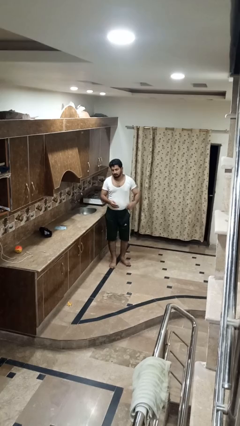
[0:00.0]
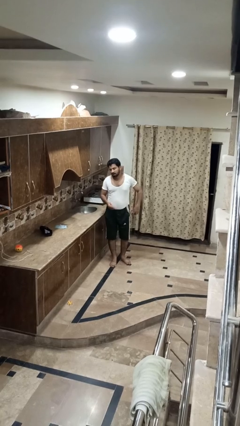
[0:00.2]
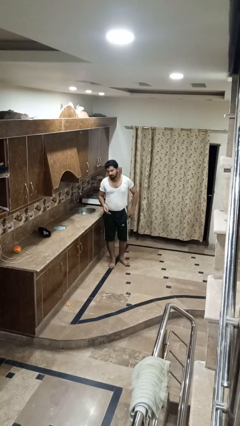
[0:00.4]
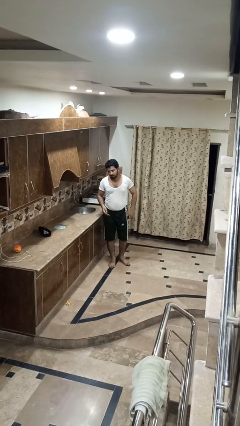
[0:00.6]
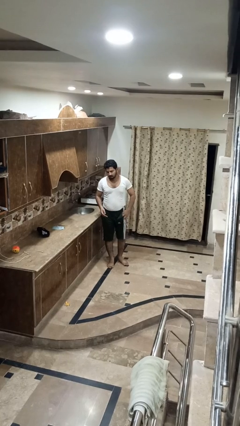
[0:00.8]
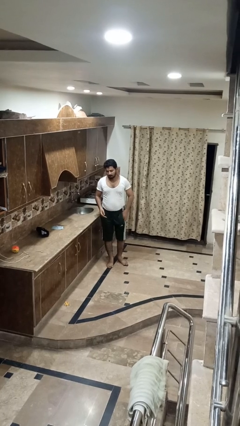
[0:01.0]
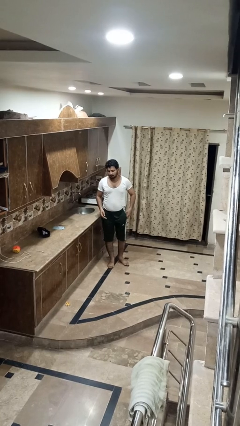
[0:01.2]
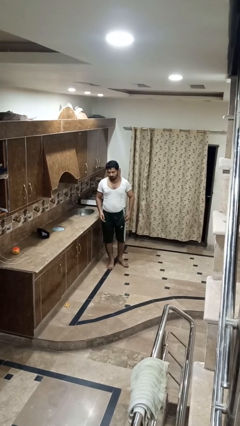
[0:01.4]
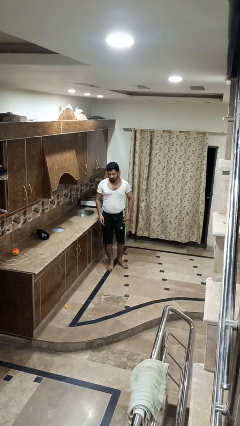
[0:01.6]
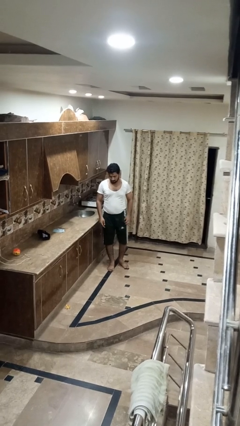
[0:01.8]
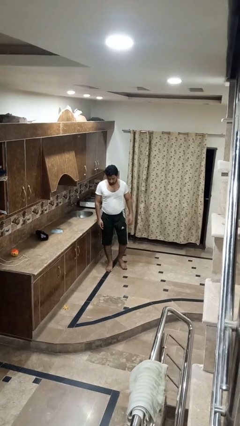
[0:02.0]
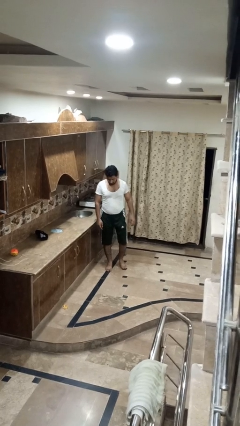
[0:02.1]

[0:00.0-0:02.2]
person puts phone into pocket

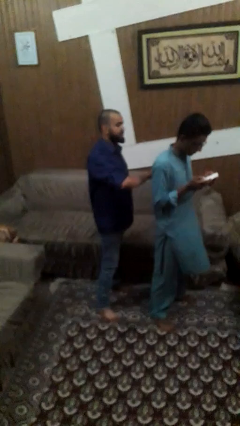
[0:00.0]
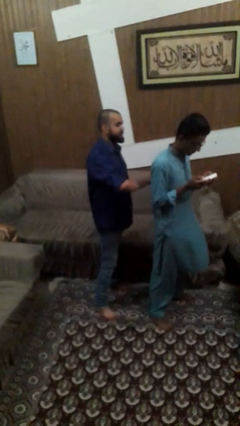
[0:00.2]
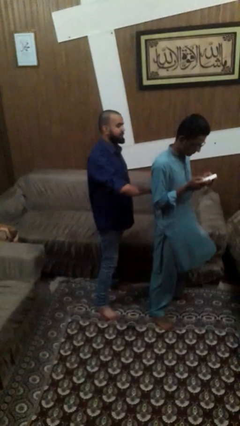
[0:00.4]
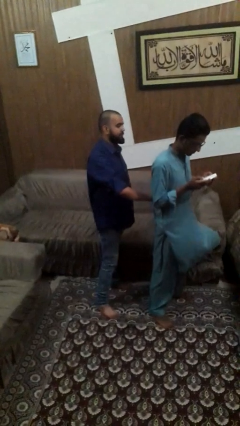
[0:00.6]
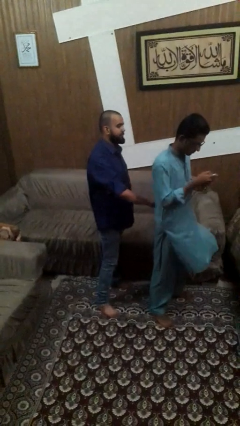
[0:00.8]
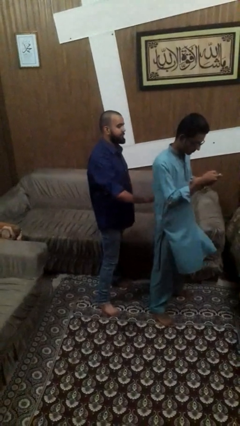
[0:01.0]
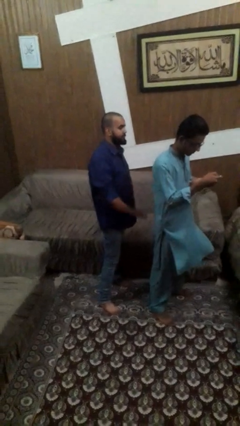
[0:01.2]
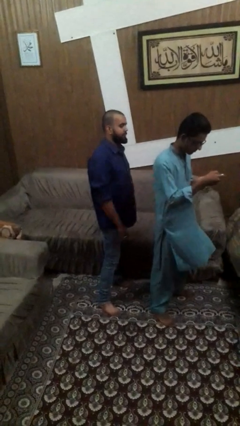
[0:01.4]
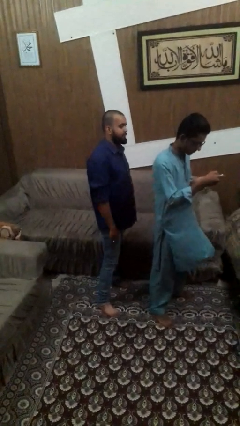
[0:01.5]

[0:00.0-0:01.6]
person touches back of person

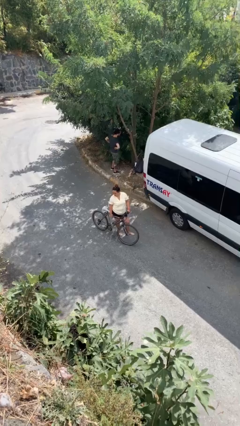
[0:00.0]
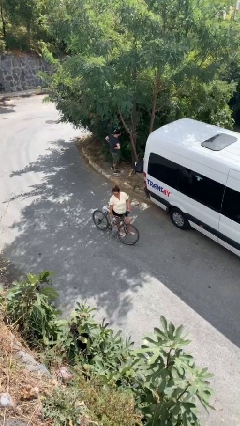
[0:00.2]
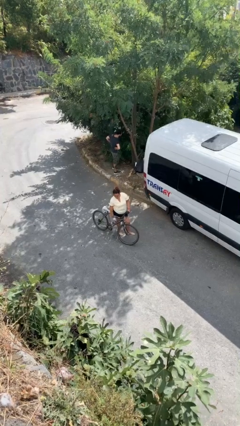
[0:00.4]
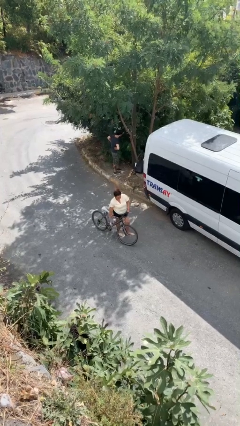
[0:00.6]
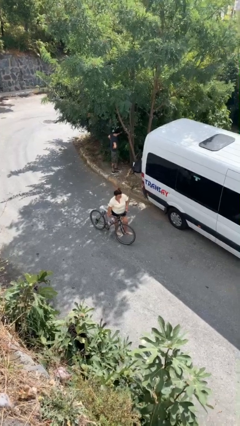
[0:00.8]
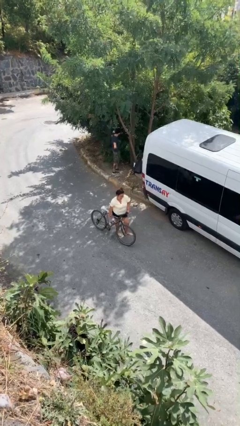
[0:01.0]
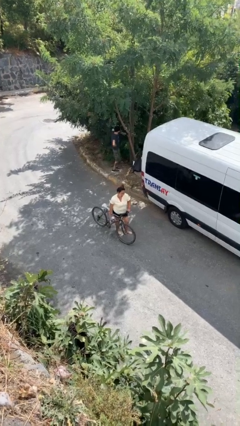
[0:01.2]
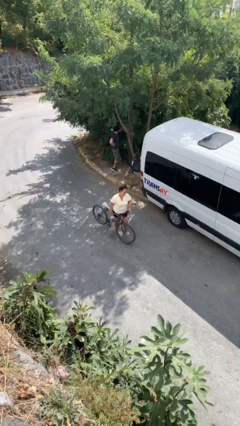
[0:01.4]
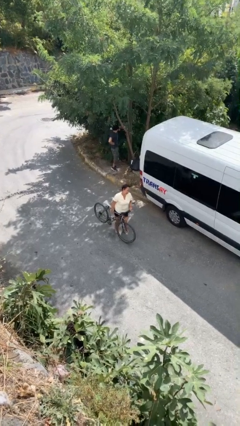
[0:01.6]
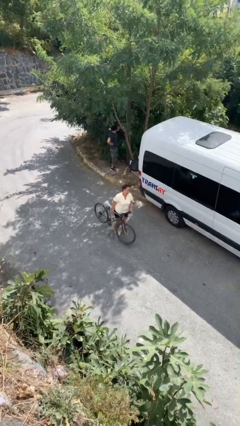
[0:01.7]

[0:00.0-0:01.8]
person picks up object from floor

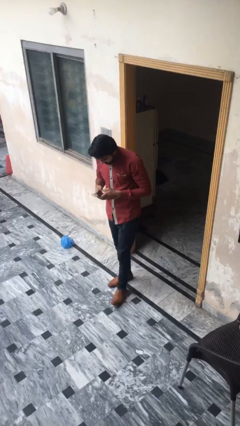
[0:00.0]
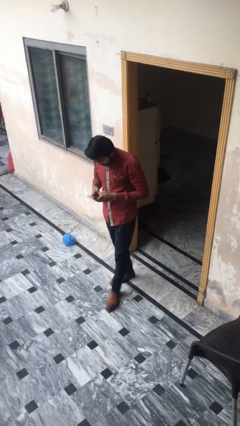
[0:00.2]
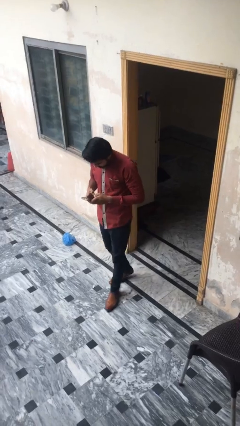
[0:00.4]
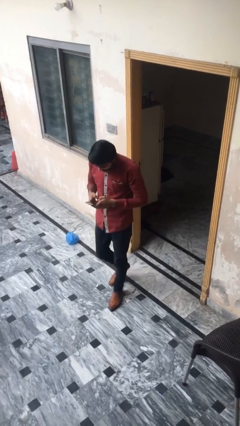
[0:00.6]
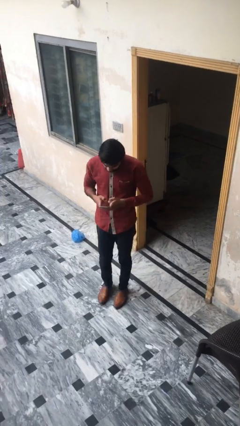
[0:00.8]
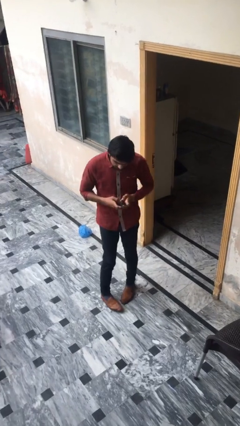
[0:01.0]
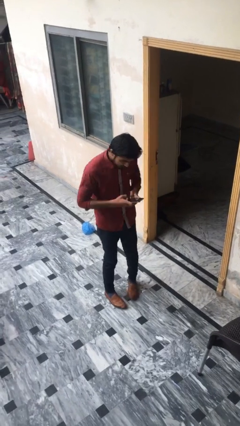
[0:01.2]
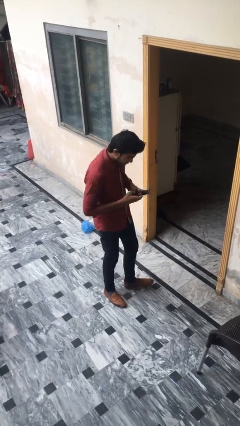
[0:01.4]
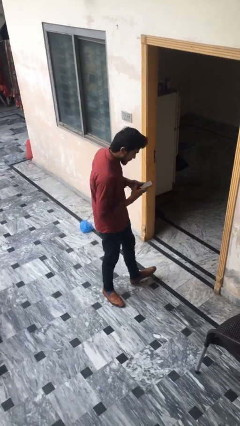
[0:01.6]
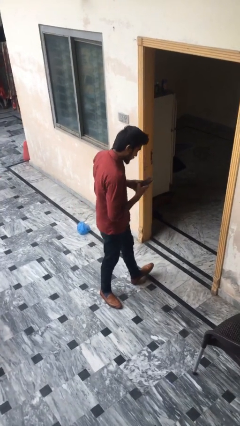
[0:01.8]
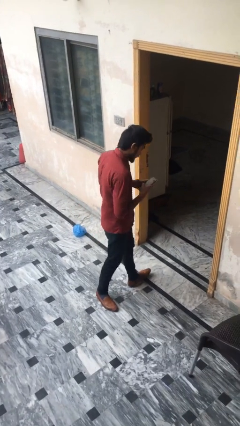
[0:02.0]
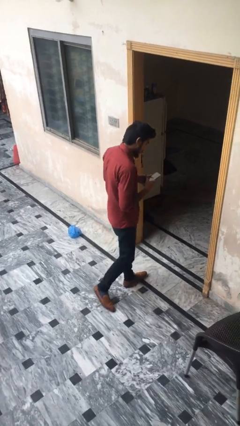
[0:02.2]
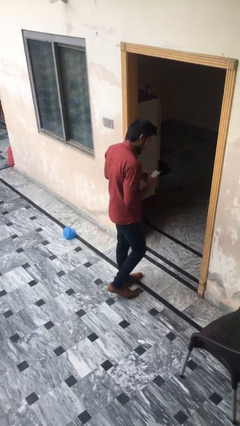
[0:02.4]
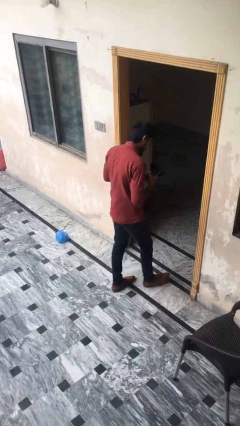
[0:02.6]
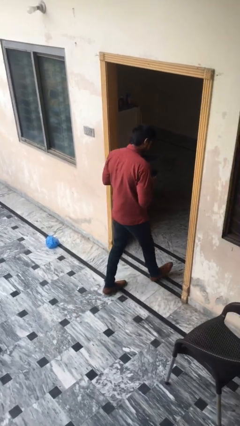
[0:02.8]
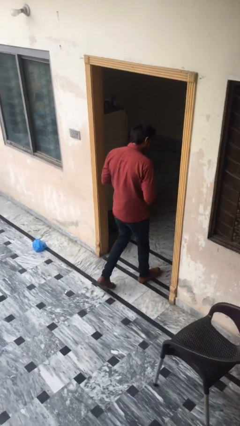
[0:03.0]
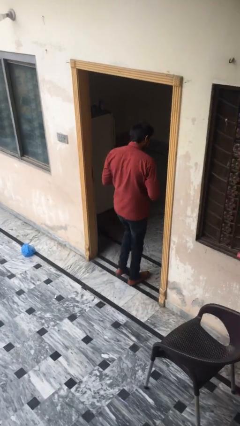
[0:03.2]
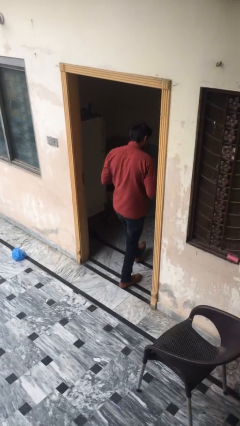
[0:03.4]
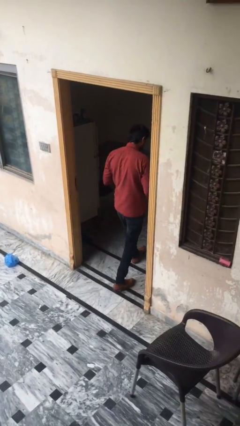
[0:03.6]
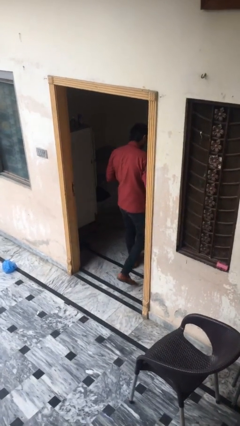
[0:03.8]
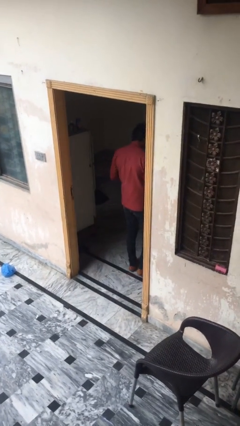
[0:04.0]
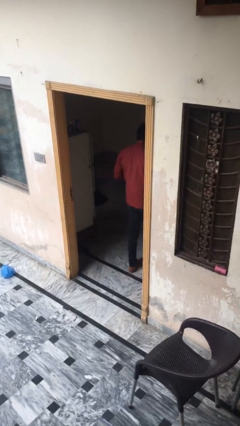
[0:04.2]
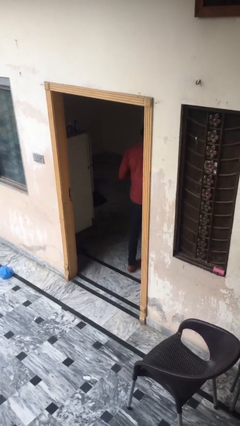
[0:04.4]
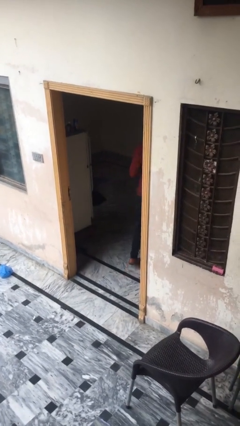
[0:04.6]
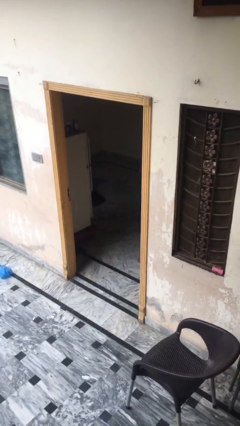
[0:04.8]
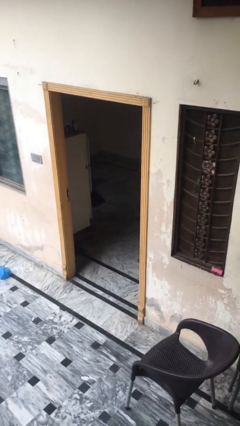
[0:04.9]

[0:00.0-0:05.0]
person exits scene through structure

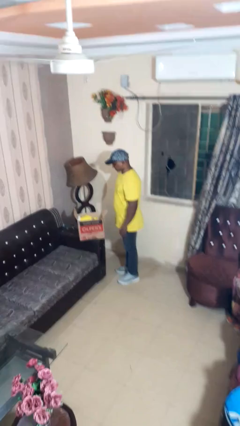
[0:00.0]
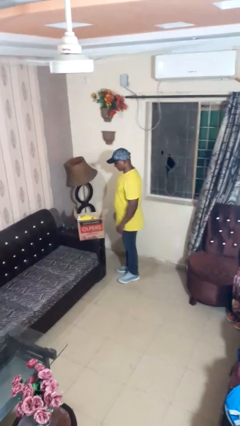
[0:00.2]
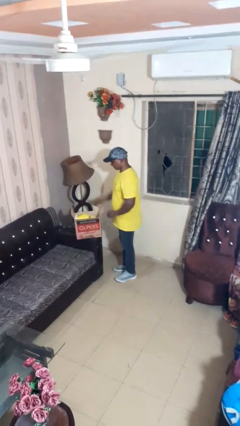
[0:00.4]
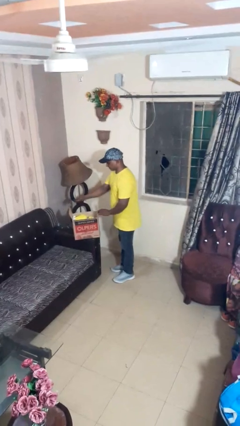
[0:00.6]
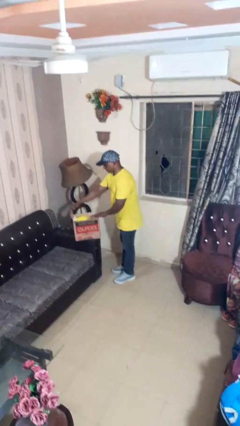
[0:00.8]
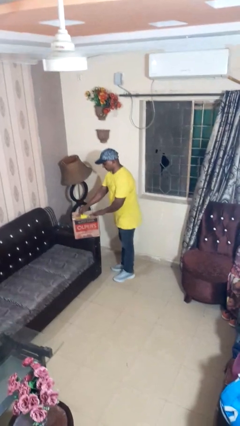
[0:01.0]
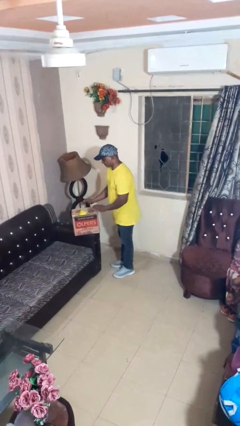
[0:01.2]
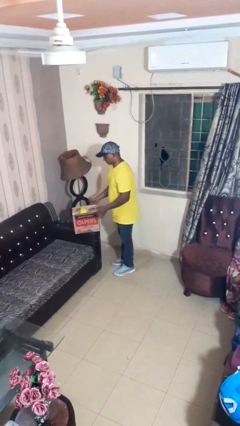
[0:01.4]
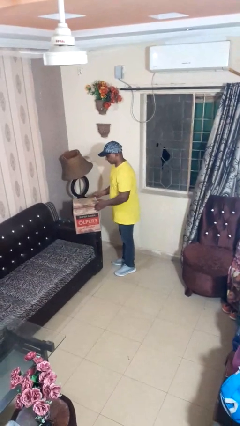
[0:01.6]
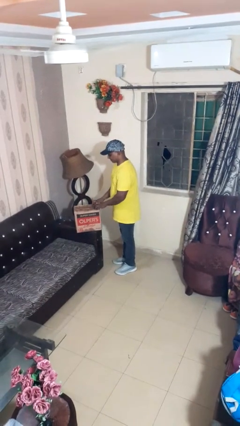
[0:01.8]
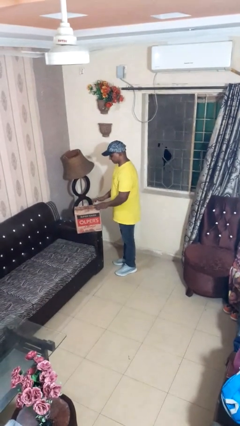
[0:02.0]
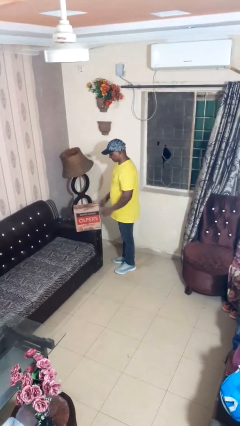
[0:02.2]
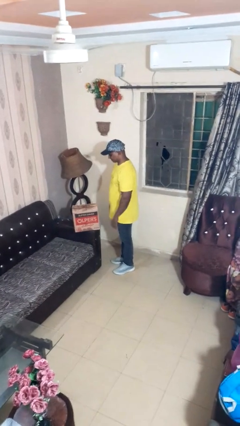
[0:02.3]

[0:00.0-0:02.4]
person closes box

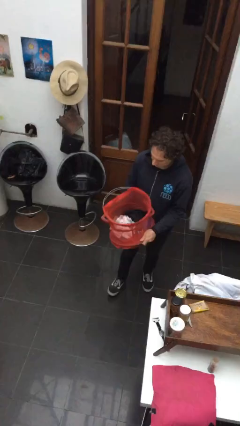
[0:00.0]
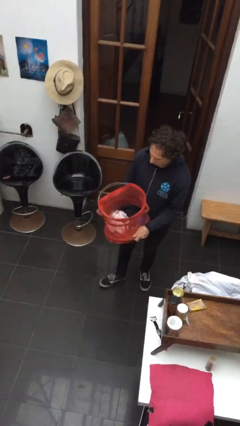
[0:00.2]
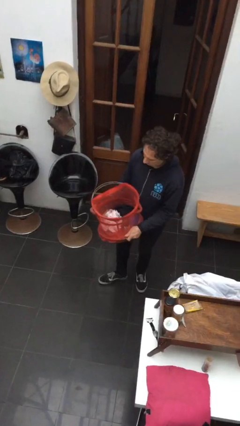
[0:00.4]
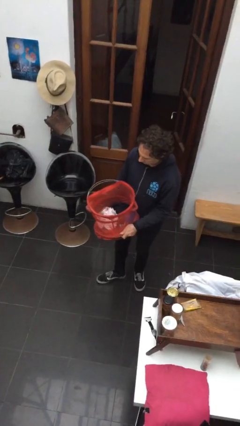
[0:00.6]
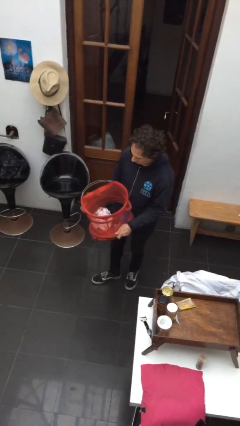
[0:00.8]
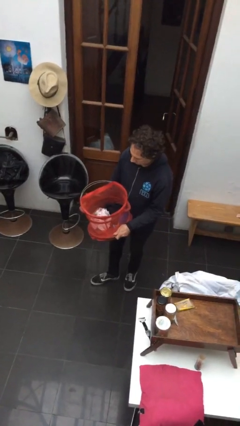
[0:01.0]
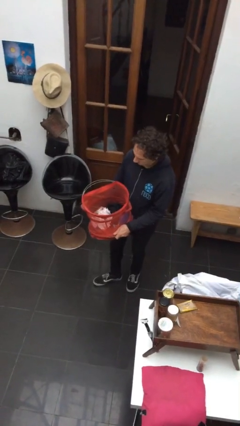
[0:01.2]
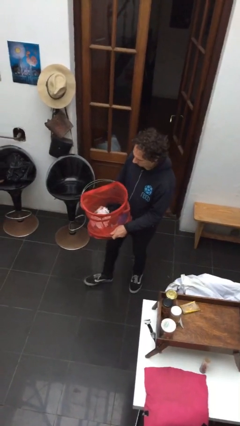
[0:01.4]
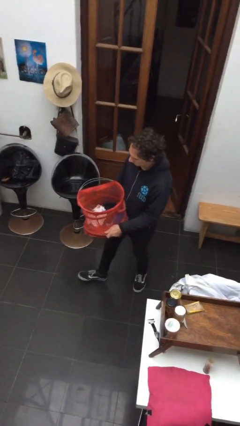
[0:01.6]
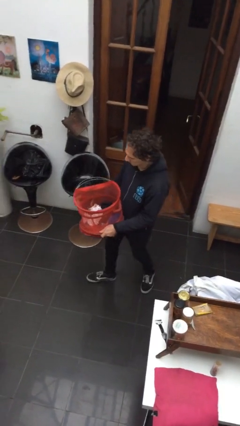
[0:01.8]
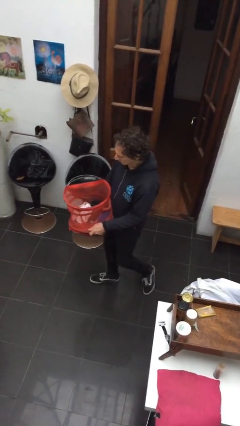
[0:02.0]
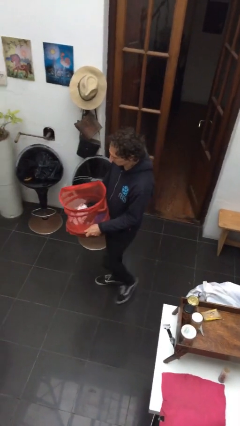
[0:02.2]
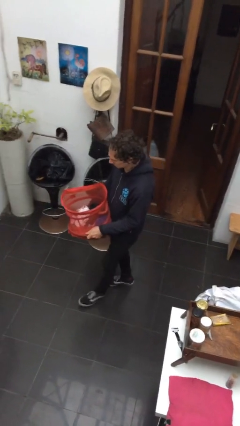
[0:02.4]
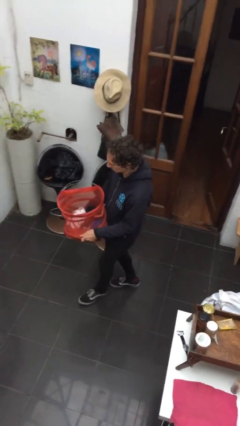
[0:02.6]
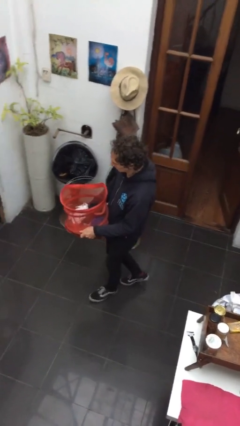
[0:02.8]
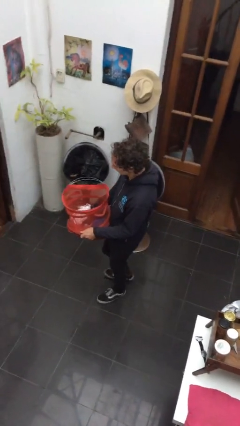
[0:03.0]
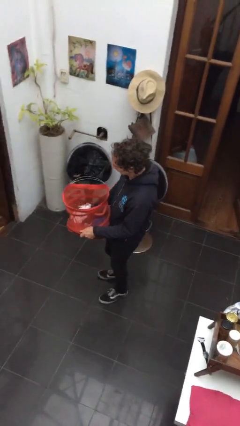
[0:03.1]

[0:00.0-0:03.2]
person carries laundry basket

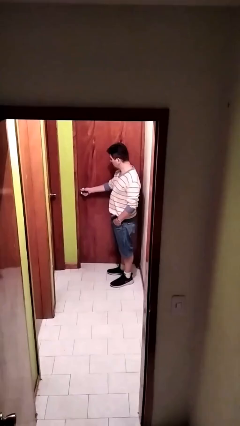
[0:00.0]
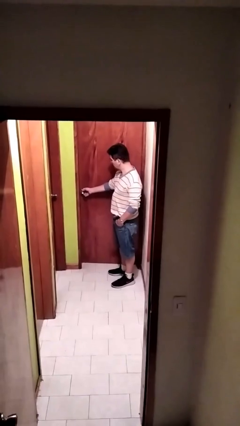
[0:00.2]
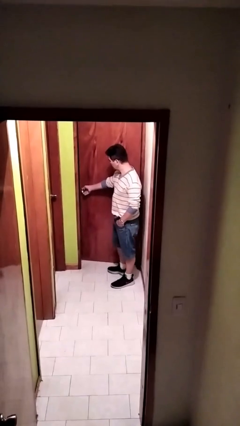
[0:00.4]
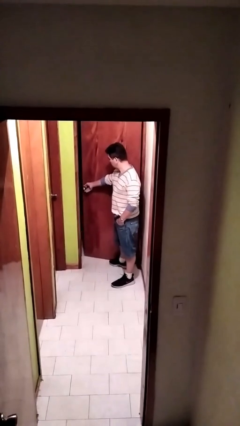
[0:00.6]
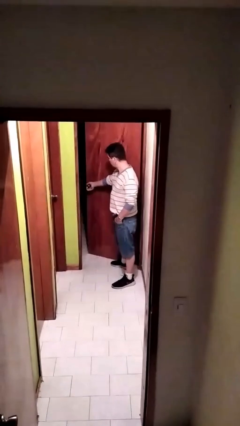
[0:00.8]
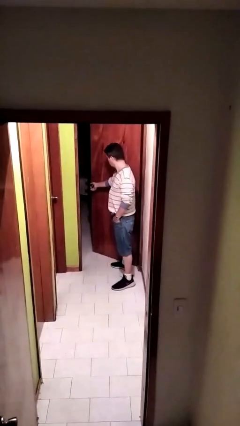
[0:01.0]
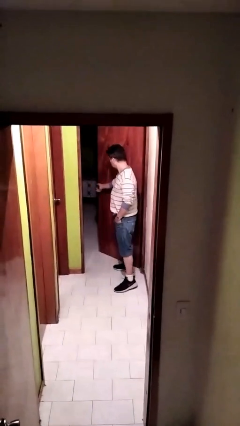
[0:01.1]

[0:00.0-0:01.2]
person opens facility door

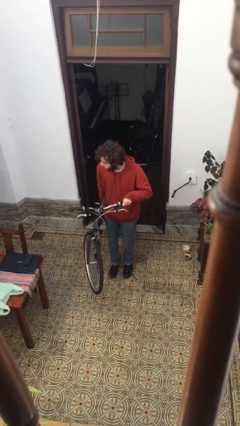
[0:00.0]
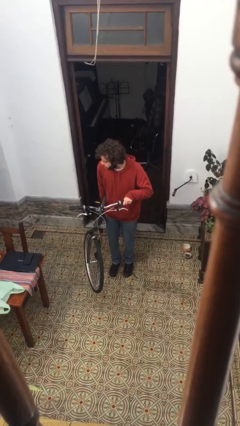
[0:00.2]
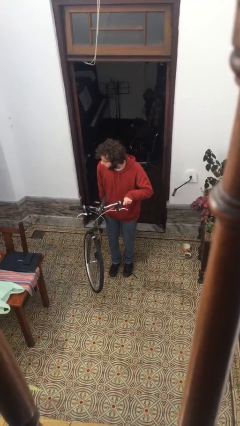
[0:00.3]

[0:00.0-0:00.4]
person carries bicycle
